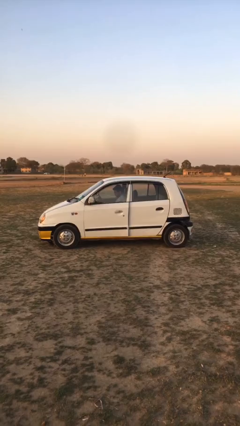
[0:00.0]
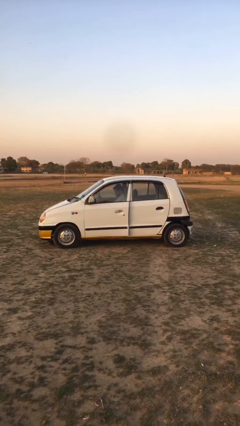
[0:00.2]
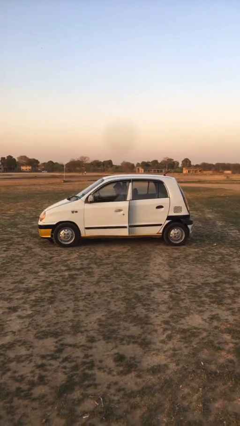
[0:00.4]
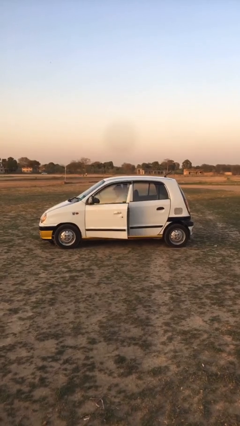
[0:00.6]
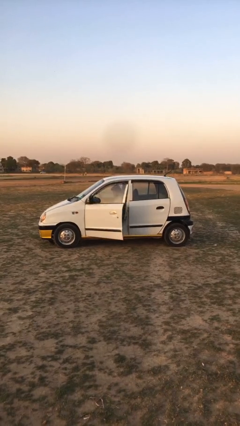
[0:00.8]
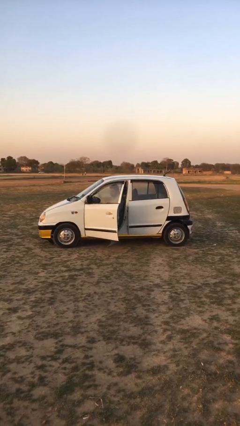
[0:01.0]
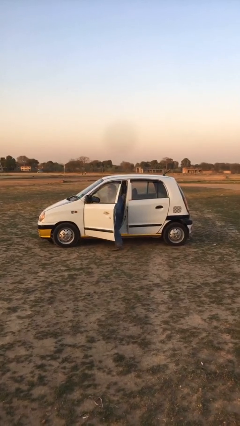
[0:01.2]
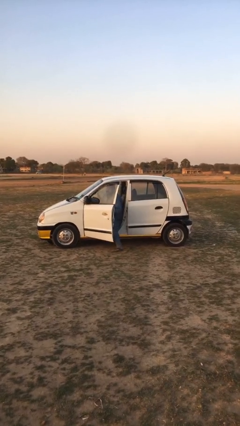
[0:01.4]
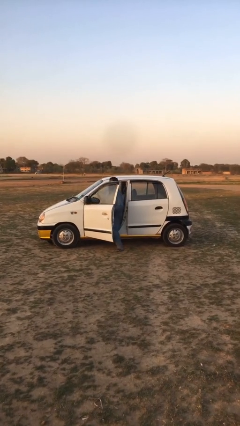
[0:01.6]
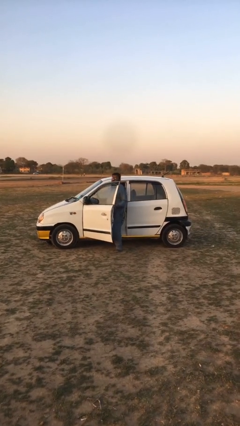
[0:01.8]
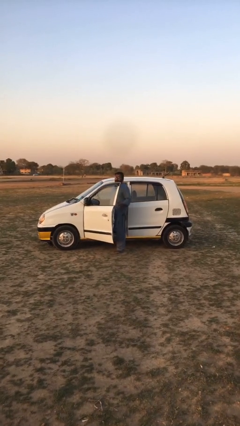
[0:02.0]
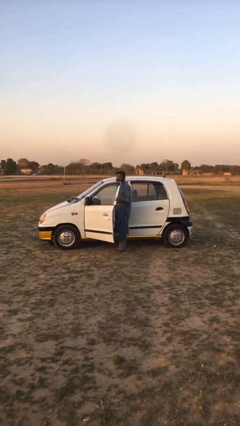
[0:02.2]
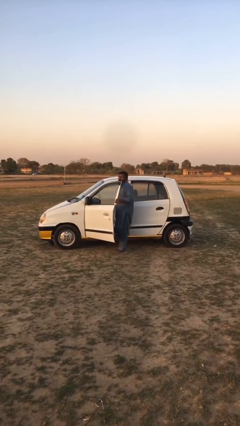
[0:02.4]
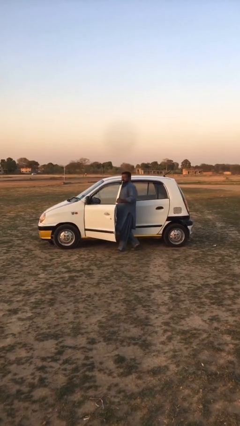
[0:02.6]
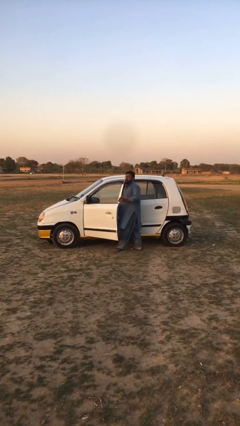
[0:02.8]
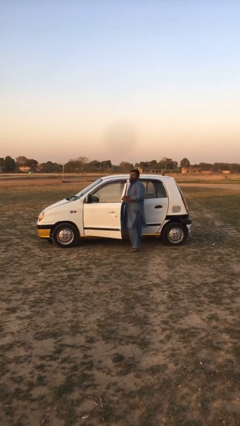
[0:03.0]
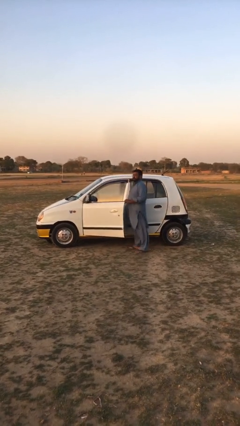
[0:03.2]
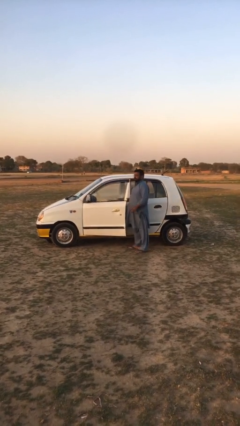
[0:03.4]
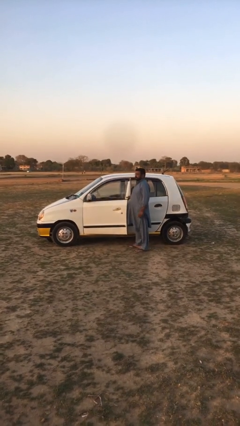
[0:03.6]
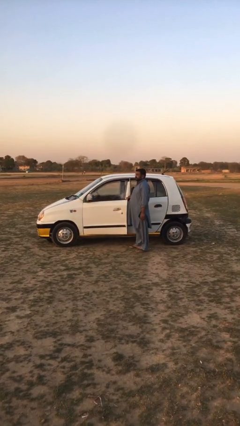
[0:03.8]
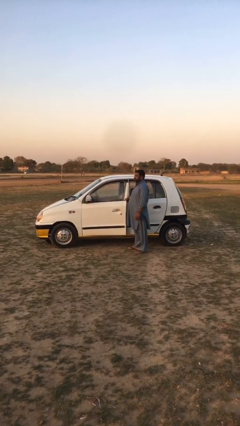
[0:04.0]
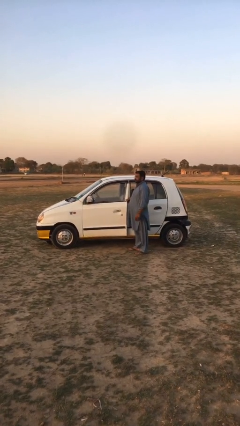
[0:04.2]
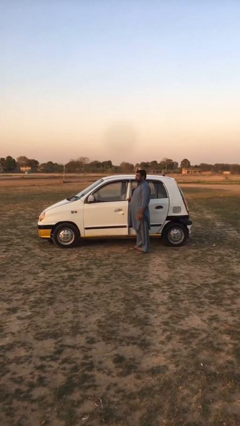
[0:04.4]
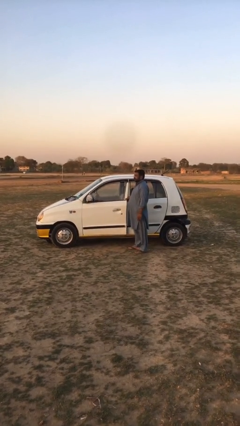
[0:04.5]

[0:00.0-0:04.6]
car drops off person

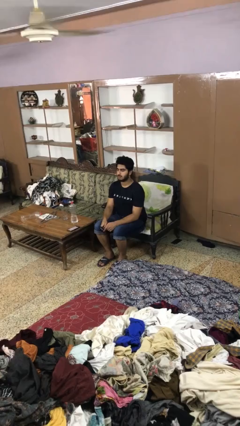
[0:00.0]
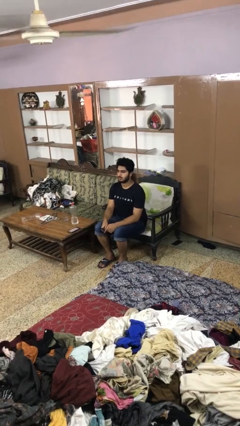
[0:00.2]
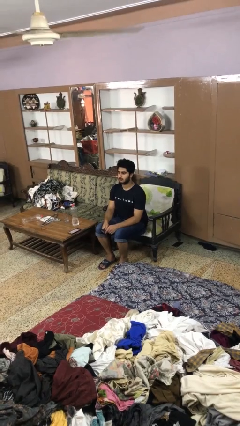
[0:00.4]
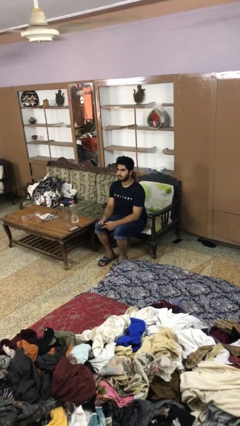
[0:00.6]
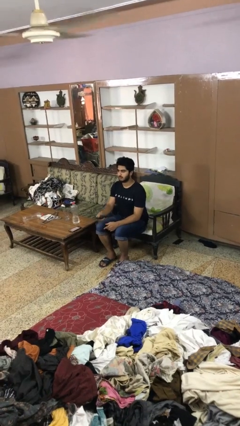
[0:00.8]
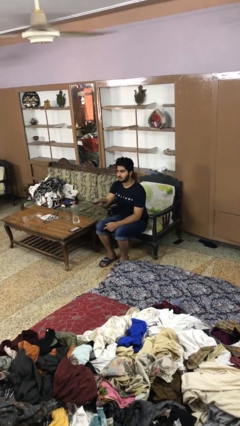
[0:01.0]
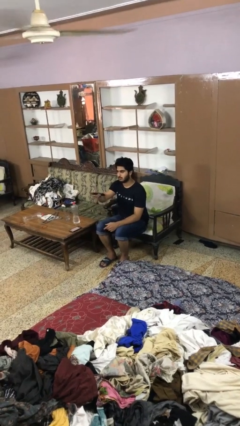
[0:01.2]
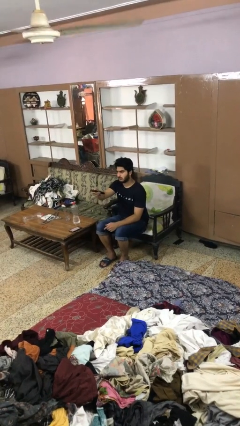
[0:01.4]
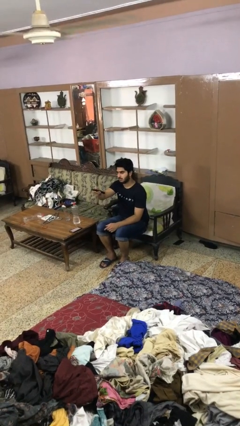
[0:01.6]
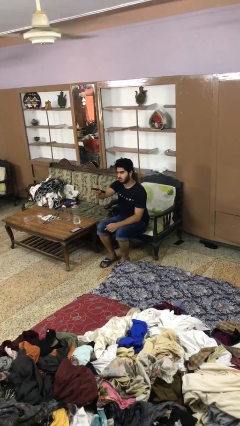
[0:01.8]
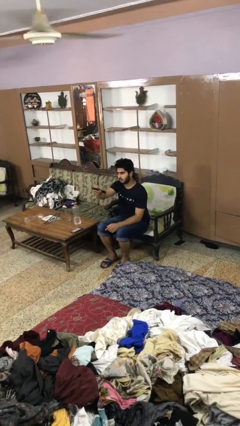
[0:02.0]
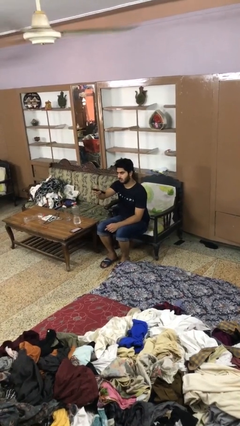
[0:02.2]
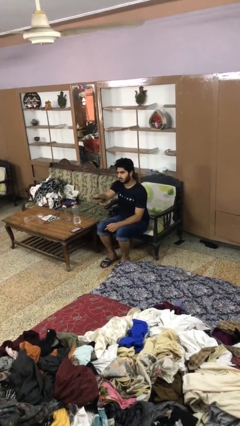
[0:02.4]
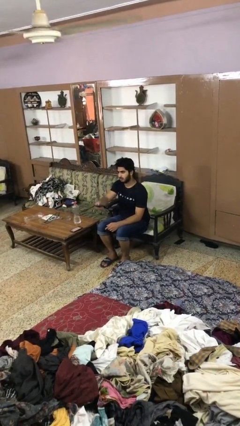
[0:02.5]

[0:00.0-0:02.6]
person uses television remote

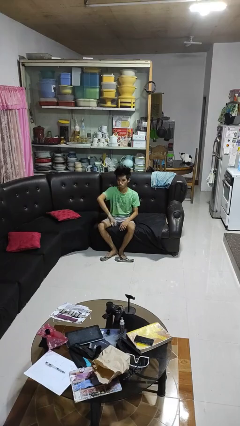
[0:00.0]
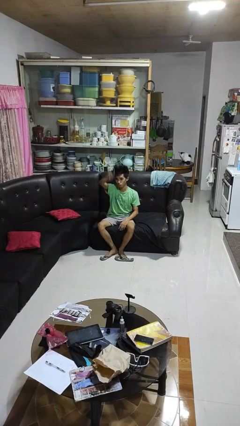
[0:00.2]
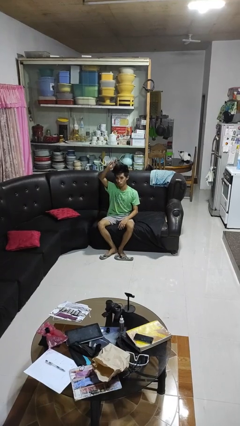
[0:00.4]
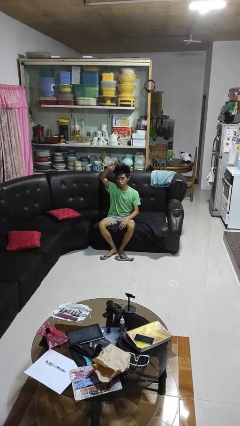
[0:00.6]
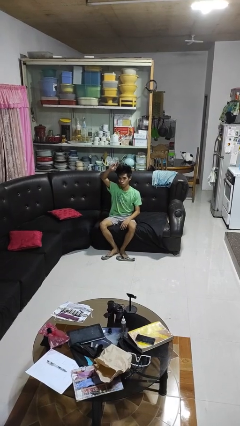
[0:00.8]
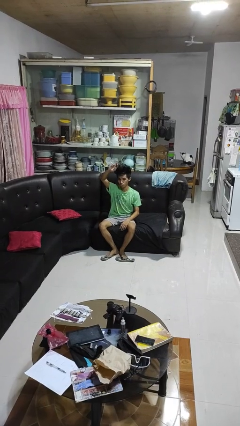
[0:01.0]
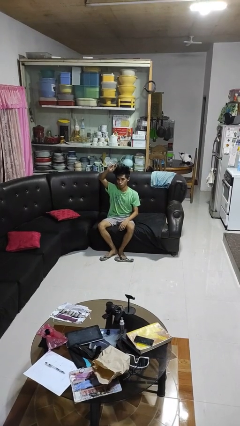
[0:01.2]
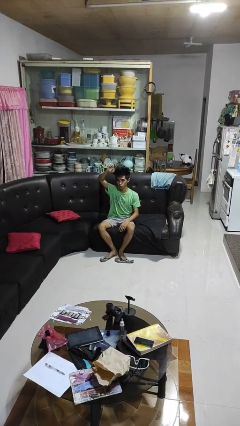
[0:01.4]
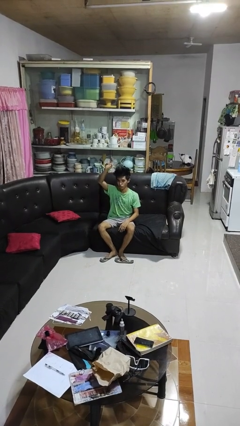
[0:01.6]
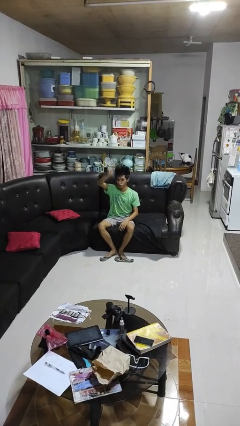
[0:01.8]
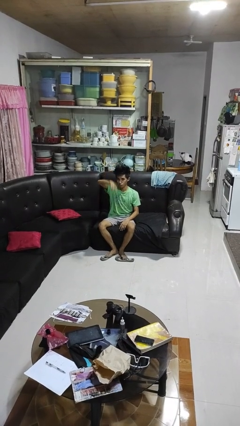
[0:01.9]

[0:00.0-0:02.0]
person gestures swipe up

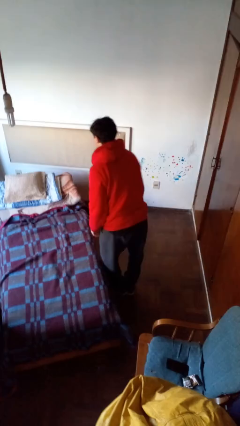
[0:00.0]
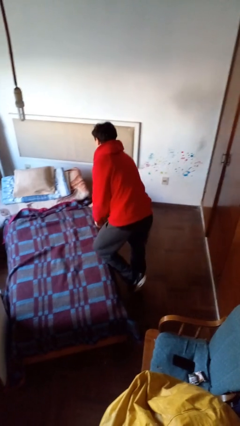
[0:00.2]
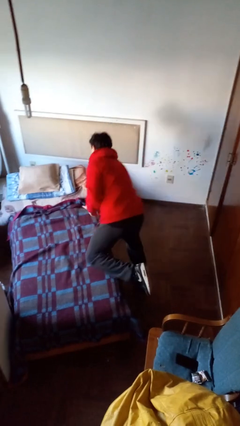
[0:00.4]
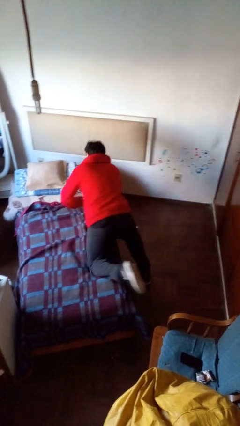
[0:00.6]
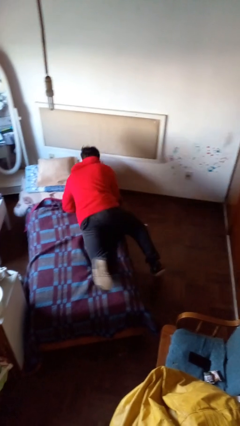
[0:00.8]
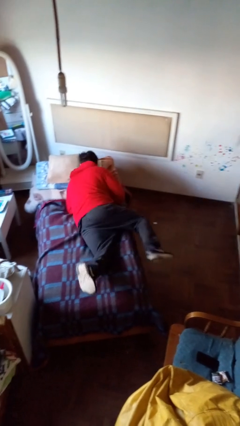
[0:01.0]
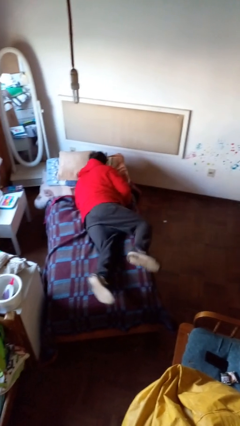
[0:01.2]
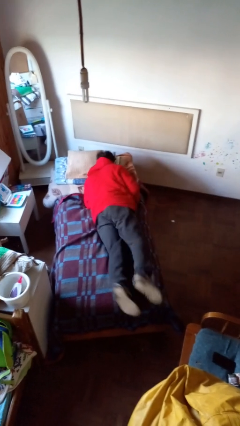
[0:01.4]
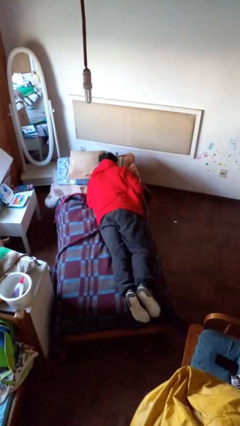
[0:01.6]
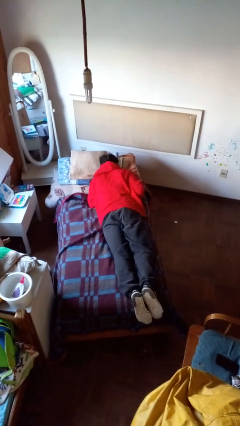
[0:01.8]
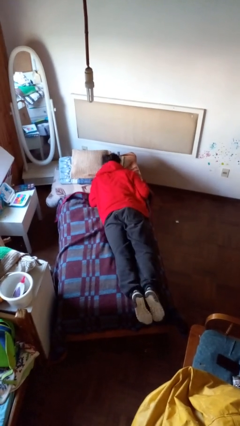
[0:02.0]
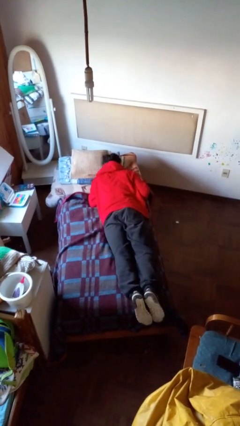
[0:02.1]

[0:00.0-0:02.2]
person lies down on bed

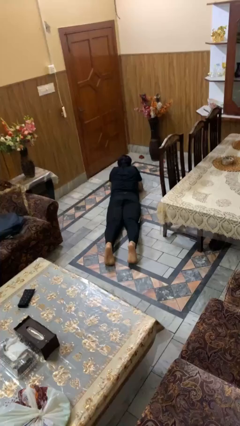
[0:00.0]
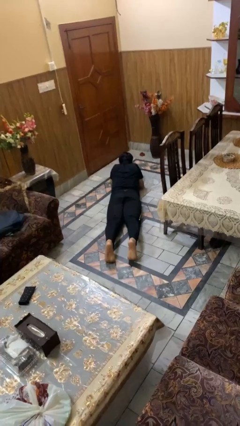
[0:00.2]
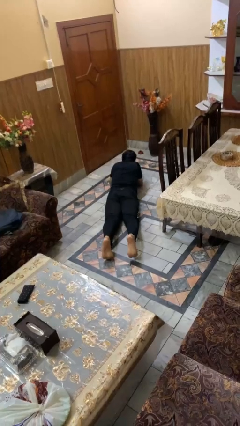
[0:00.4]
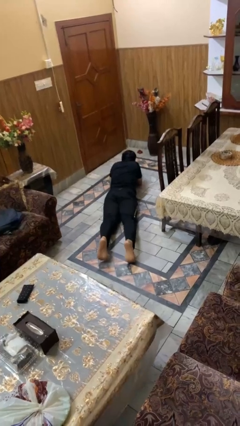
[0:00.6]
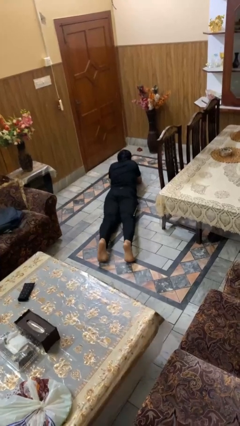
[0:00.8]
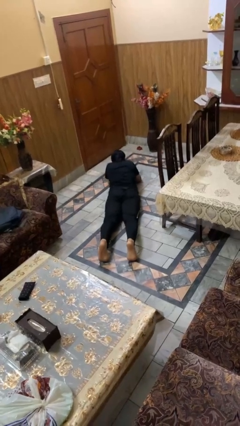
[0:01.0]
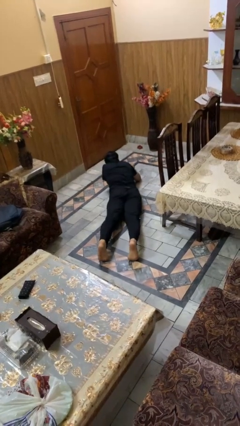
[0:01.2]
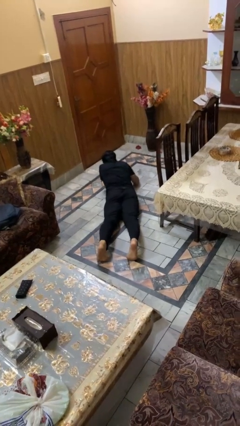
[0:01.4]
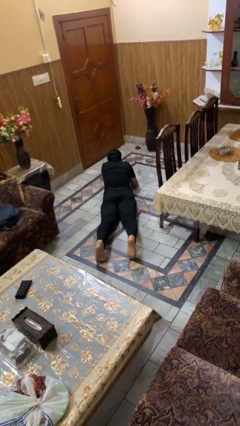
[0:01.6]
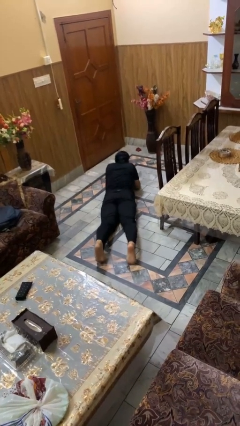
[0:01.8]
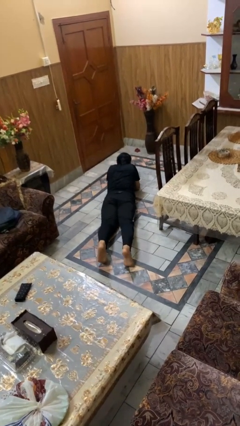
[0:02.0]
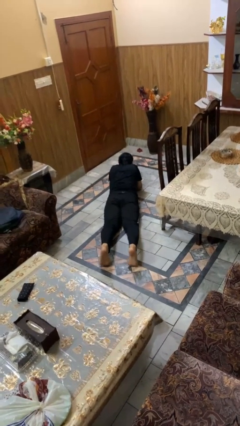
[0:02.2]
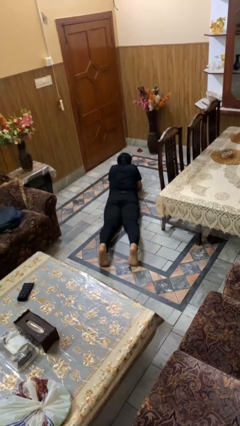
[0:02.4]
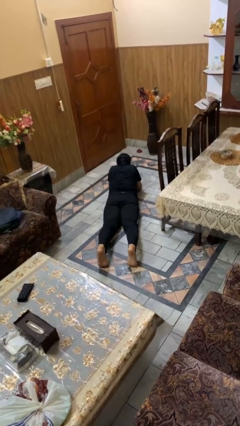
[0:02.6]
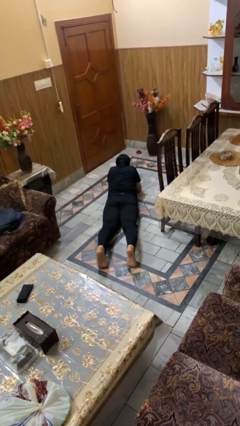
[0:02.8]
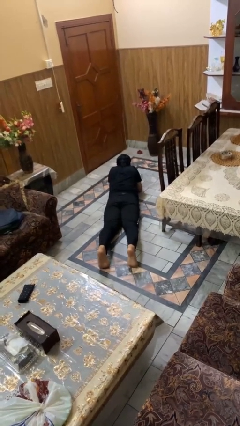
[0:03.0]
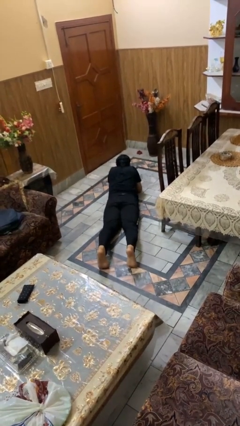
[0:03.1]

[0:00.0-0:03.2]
person crawls

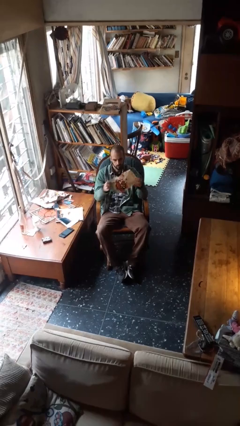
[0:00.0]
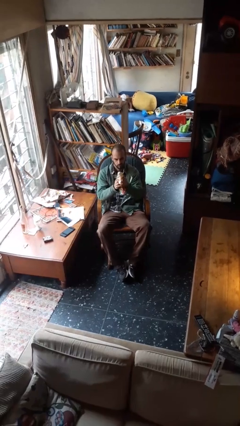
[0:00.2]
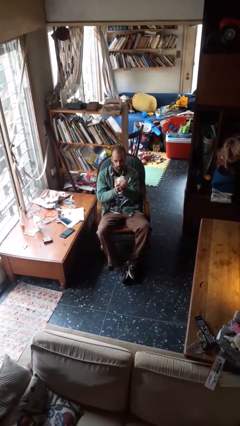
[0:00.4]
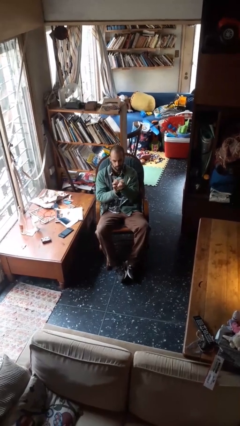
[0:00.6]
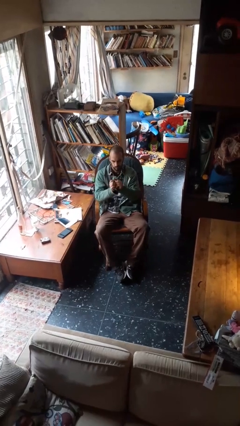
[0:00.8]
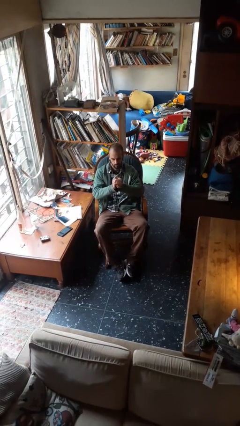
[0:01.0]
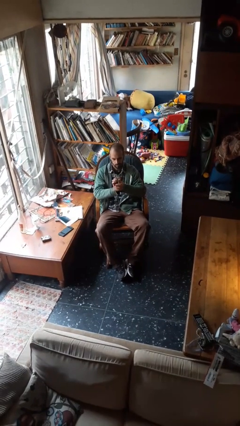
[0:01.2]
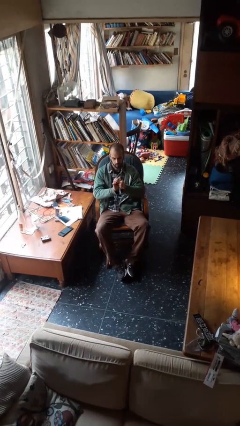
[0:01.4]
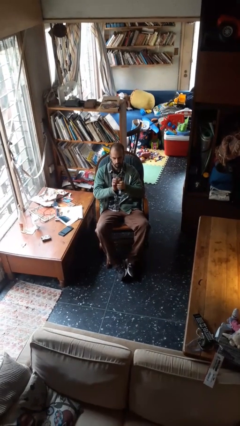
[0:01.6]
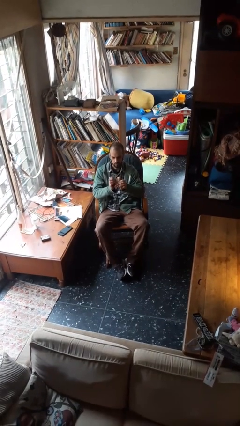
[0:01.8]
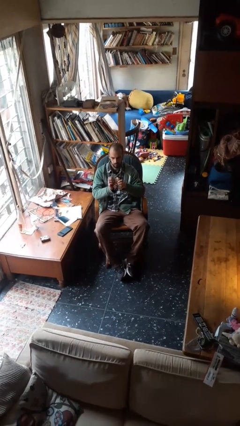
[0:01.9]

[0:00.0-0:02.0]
person crumples paper

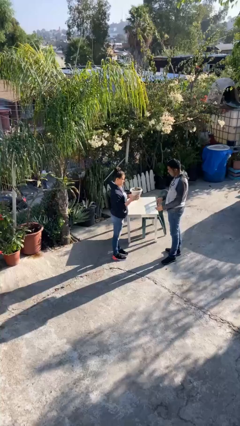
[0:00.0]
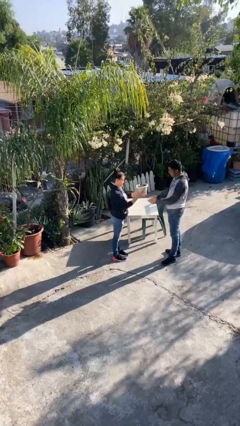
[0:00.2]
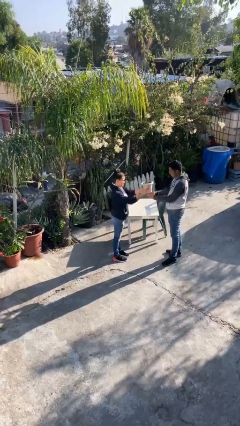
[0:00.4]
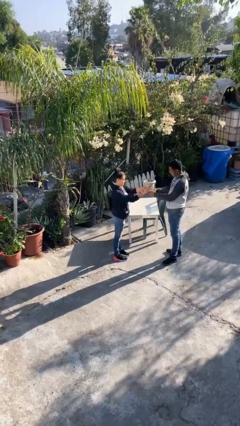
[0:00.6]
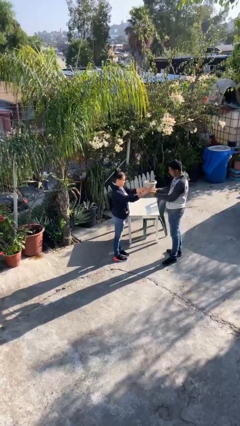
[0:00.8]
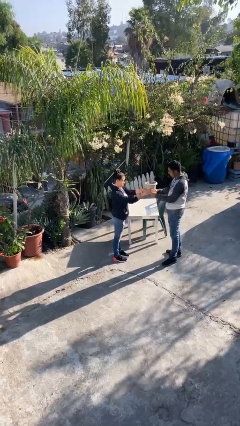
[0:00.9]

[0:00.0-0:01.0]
person transfers object to person
